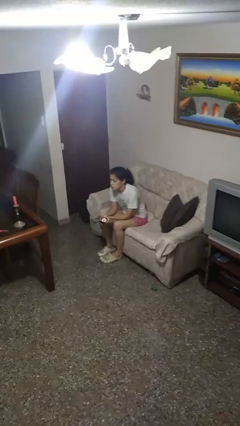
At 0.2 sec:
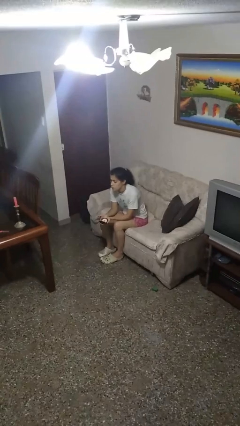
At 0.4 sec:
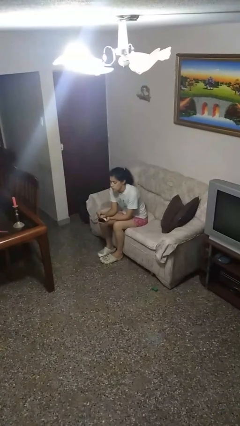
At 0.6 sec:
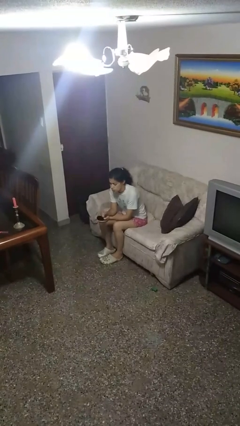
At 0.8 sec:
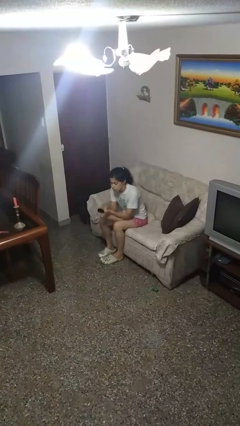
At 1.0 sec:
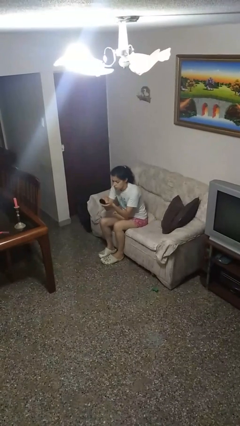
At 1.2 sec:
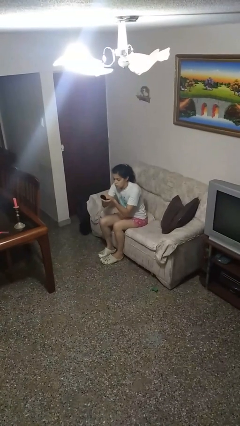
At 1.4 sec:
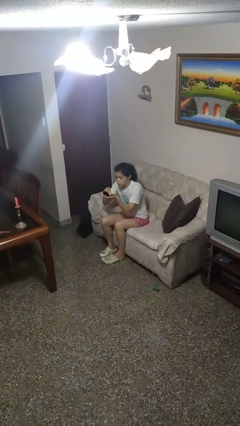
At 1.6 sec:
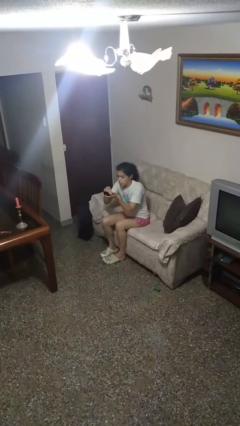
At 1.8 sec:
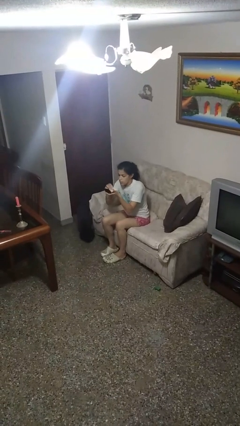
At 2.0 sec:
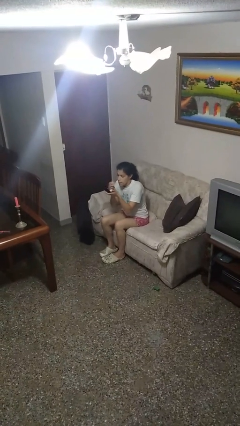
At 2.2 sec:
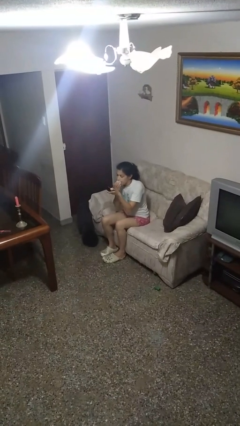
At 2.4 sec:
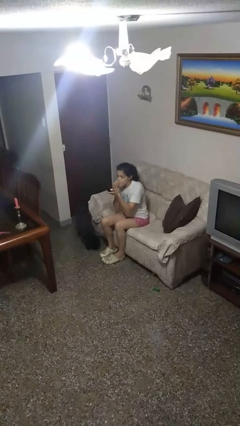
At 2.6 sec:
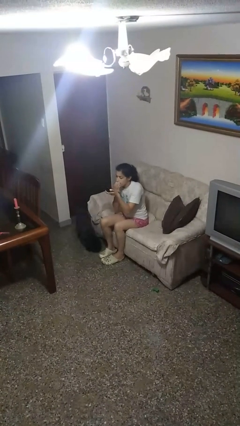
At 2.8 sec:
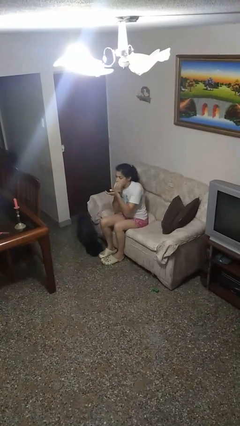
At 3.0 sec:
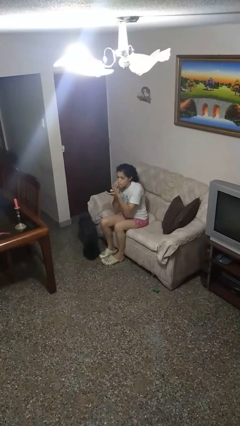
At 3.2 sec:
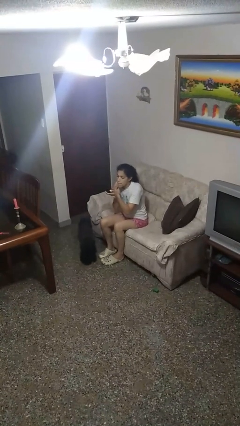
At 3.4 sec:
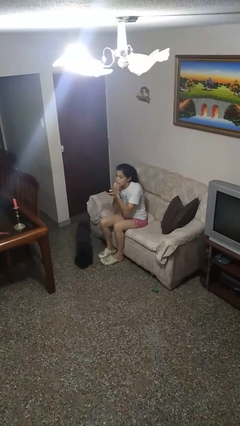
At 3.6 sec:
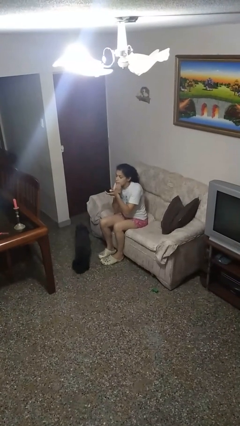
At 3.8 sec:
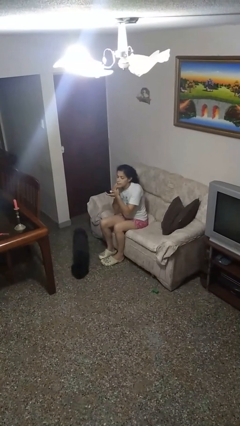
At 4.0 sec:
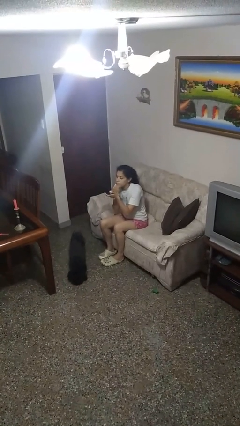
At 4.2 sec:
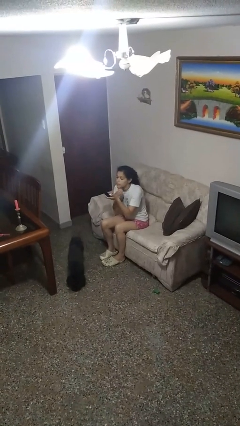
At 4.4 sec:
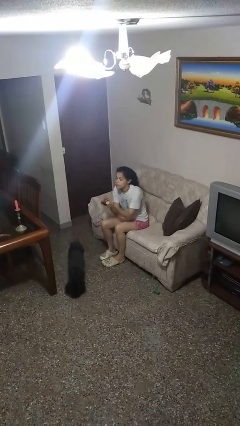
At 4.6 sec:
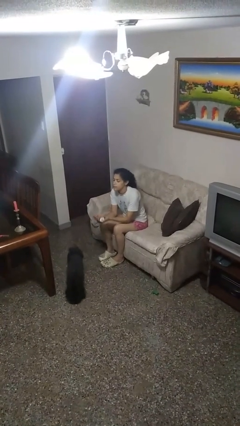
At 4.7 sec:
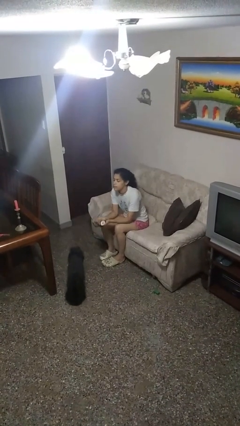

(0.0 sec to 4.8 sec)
person applies foundation makeup

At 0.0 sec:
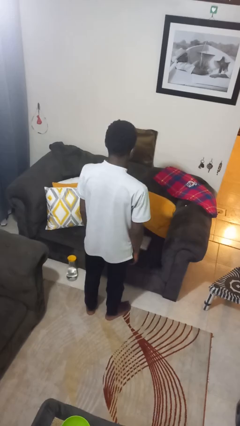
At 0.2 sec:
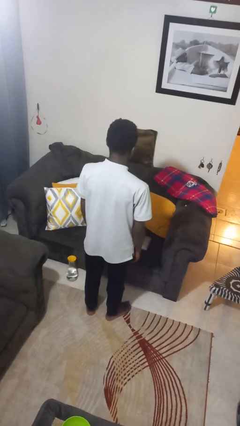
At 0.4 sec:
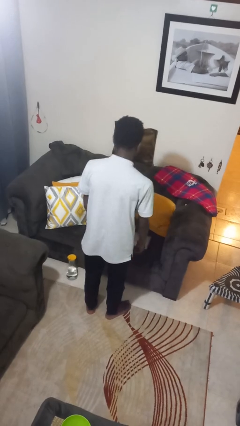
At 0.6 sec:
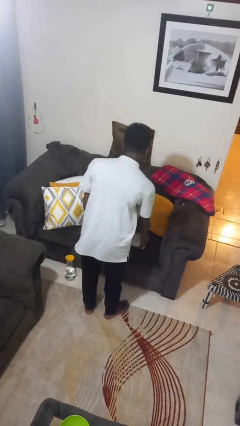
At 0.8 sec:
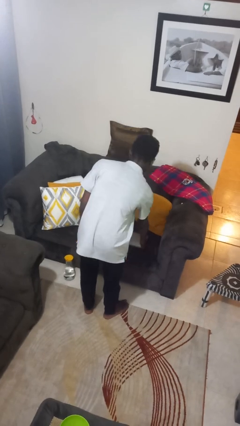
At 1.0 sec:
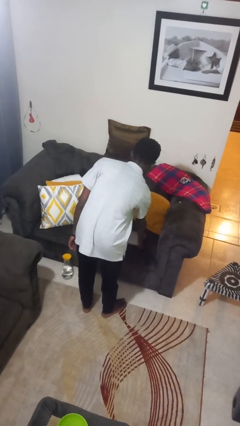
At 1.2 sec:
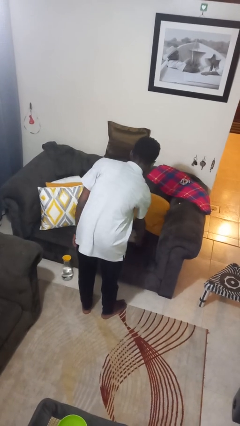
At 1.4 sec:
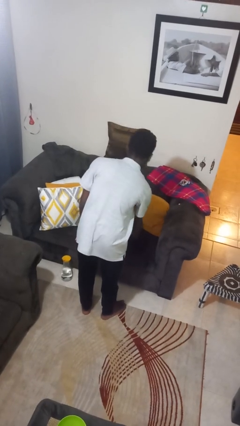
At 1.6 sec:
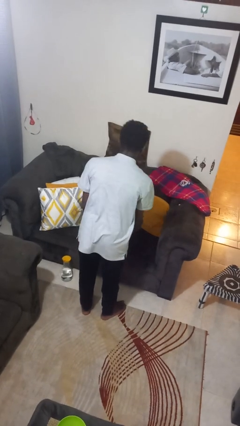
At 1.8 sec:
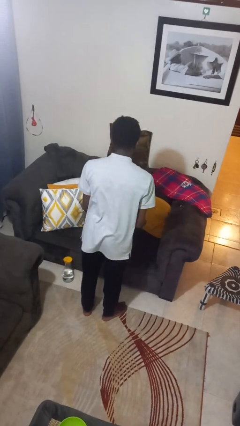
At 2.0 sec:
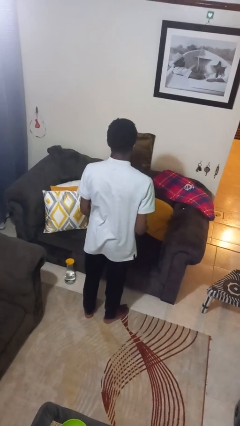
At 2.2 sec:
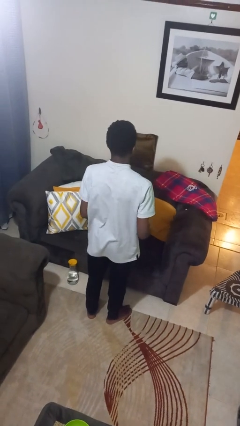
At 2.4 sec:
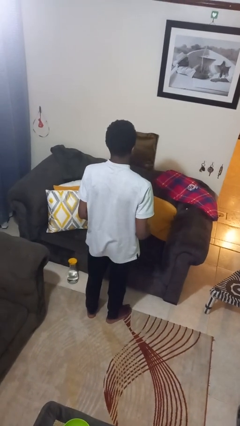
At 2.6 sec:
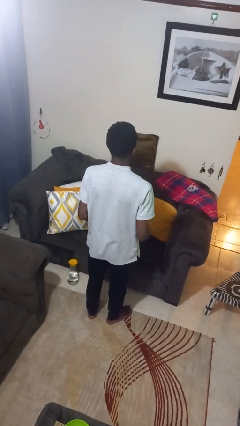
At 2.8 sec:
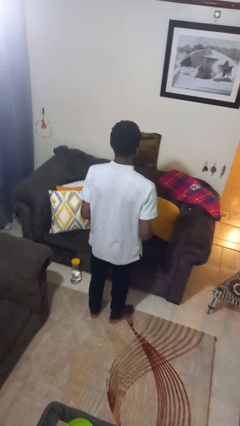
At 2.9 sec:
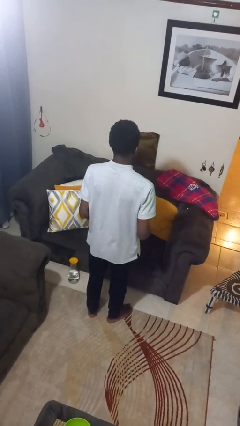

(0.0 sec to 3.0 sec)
person picks up object from couch

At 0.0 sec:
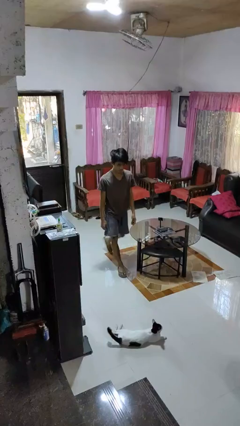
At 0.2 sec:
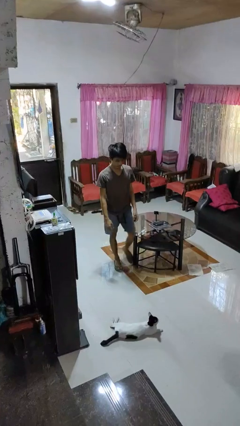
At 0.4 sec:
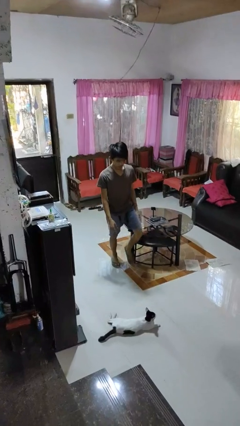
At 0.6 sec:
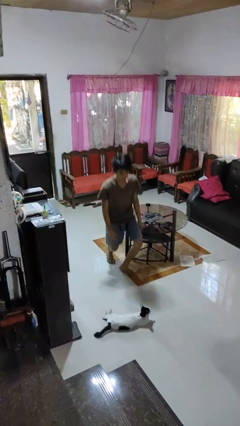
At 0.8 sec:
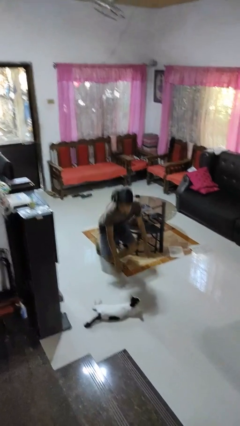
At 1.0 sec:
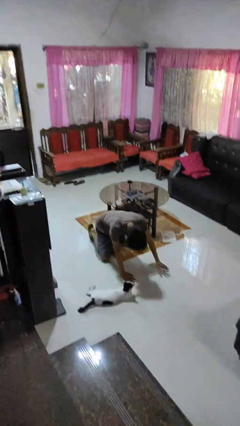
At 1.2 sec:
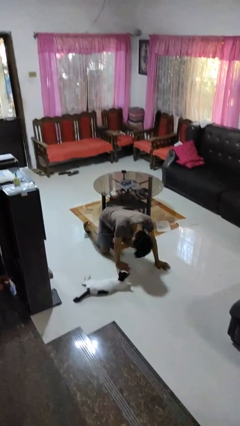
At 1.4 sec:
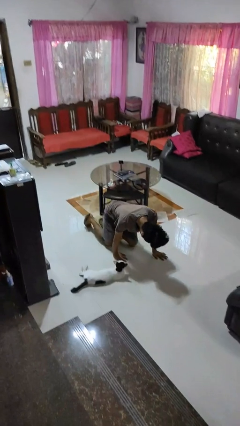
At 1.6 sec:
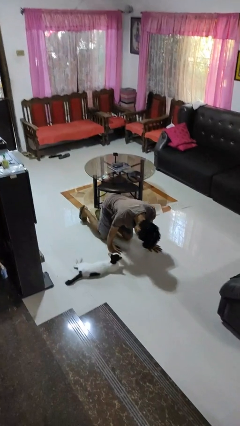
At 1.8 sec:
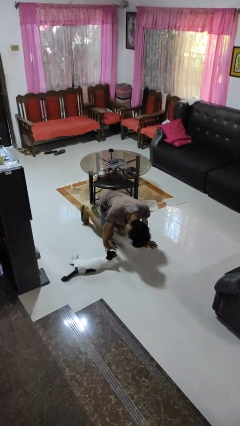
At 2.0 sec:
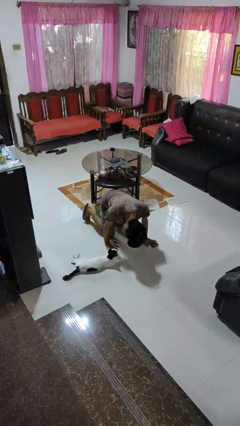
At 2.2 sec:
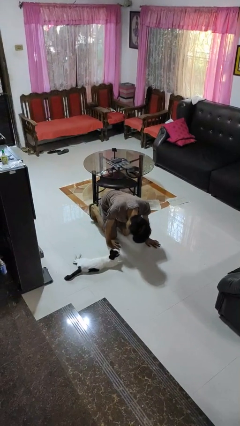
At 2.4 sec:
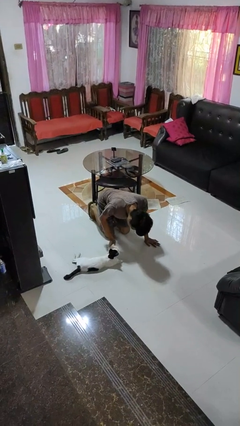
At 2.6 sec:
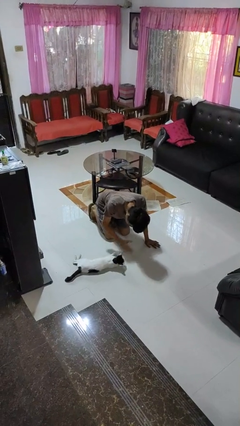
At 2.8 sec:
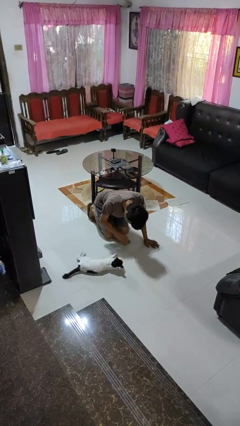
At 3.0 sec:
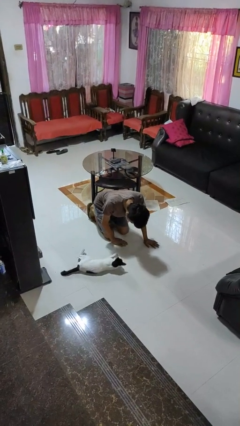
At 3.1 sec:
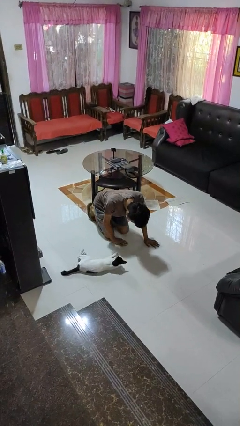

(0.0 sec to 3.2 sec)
person trips on object on floor

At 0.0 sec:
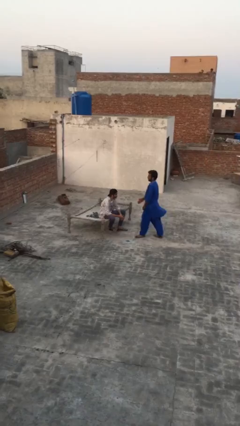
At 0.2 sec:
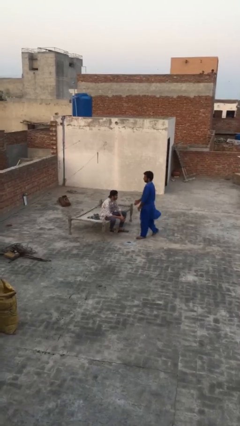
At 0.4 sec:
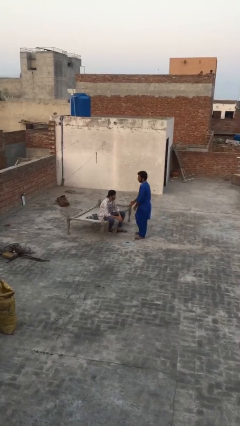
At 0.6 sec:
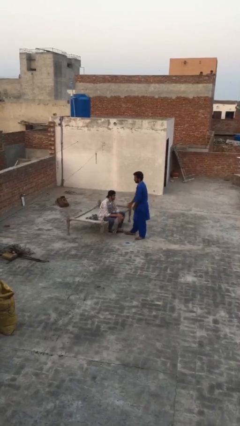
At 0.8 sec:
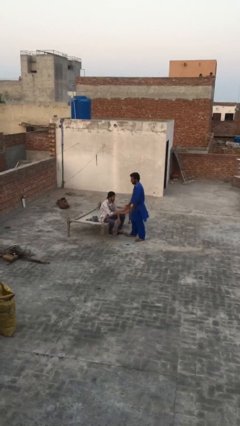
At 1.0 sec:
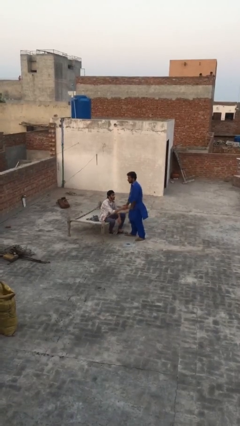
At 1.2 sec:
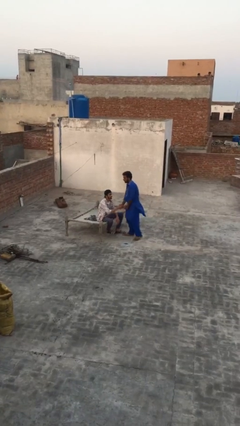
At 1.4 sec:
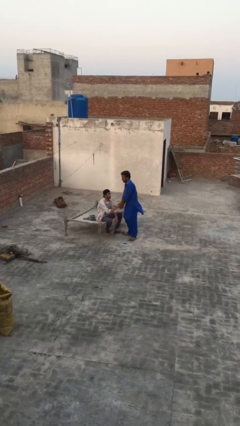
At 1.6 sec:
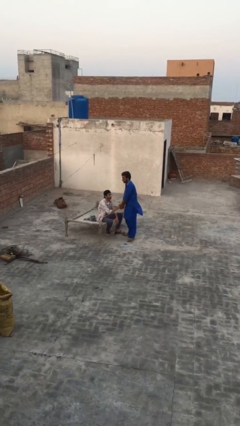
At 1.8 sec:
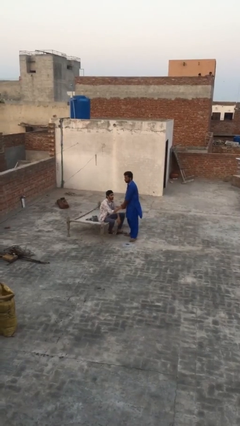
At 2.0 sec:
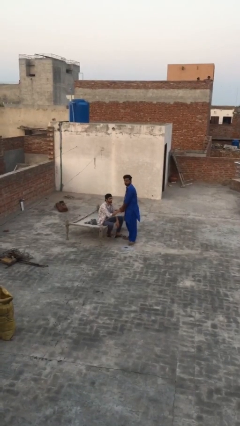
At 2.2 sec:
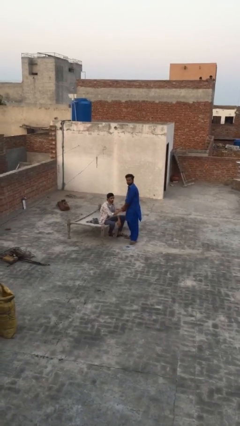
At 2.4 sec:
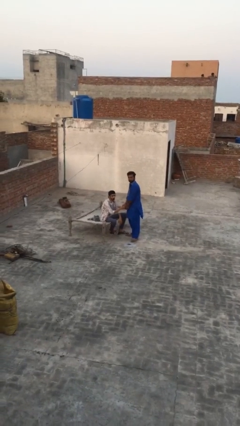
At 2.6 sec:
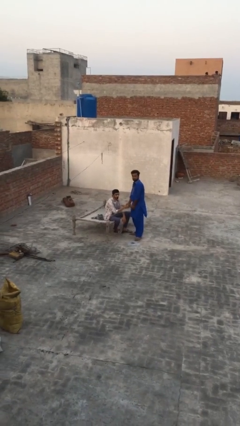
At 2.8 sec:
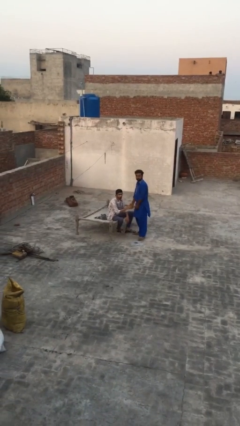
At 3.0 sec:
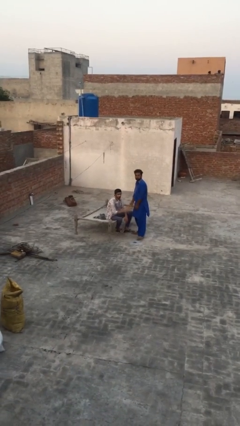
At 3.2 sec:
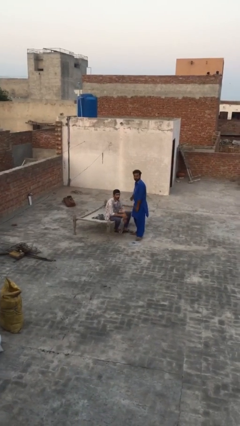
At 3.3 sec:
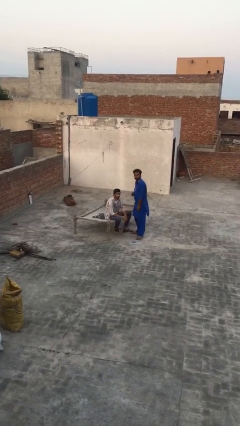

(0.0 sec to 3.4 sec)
person shakes hand

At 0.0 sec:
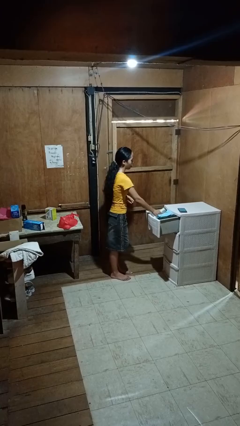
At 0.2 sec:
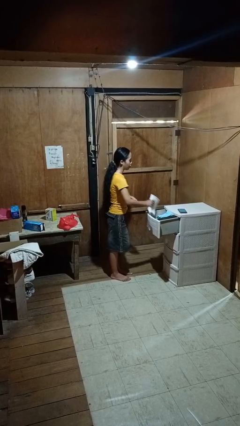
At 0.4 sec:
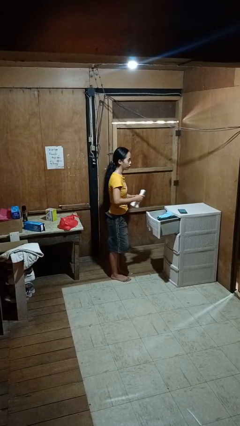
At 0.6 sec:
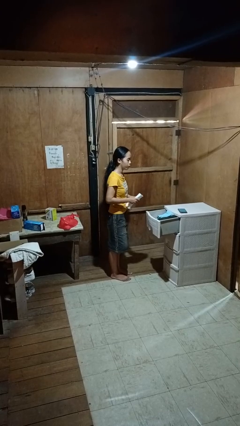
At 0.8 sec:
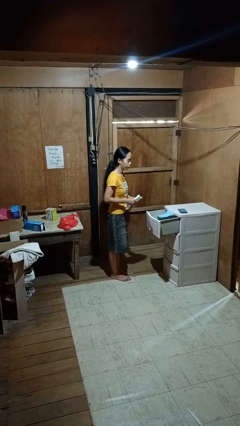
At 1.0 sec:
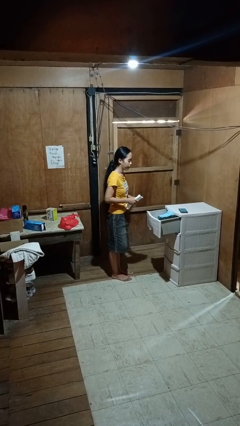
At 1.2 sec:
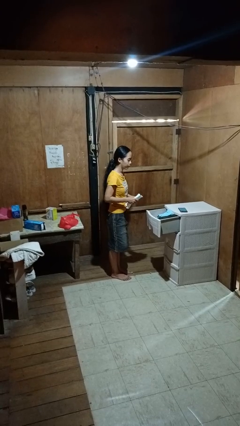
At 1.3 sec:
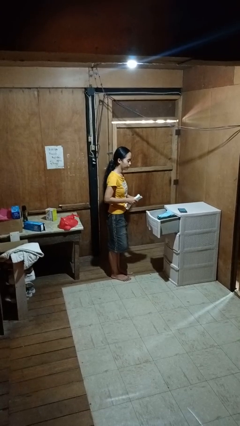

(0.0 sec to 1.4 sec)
person takes clothes from dresser

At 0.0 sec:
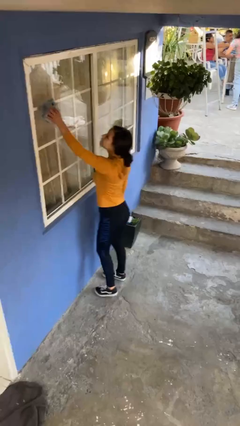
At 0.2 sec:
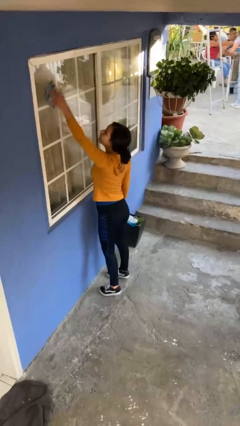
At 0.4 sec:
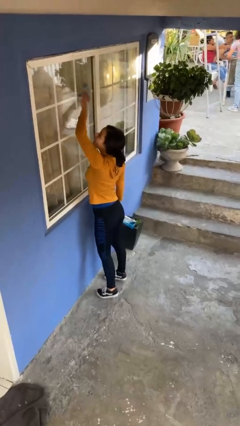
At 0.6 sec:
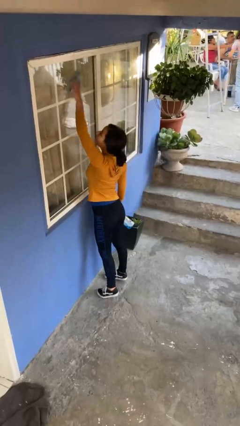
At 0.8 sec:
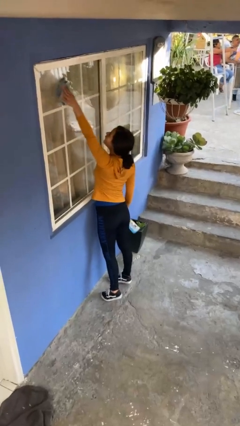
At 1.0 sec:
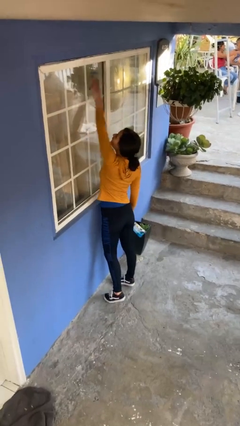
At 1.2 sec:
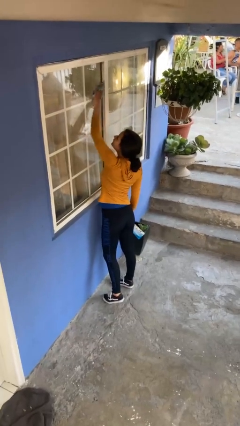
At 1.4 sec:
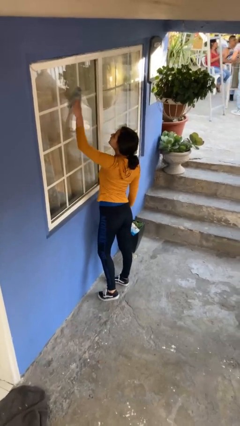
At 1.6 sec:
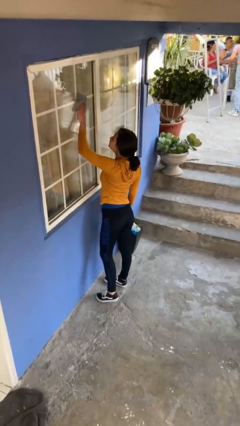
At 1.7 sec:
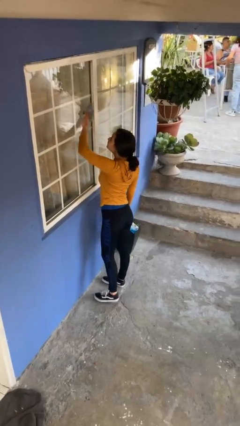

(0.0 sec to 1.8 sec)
person washes window
